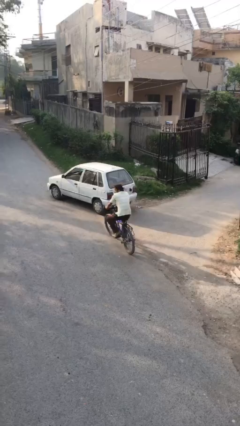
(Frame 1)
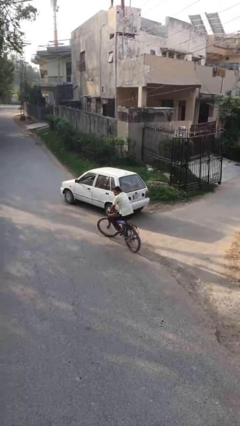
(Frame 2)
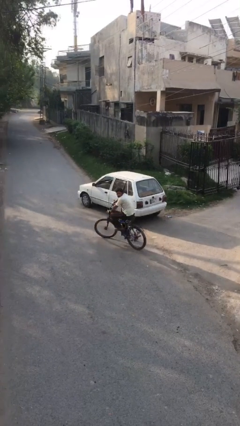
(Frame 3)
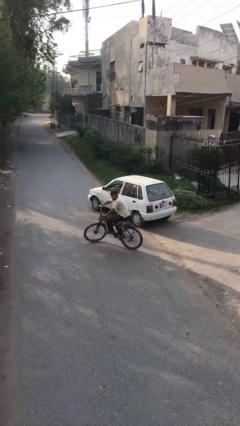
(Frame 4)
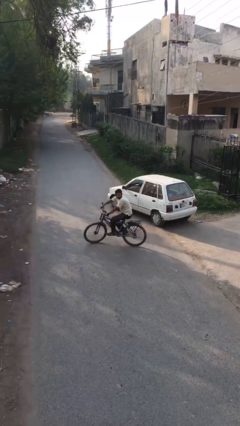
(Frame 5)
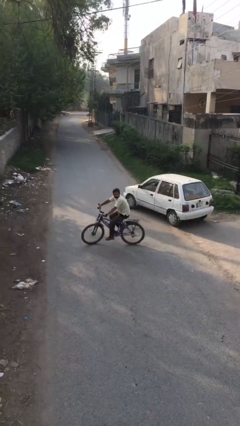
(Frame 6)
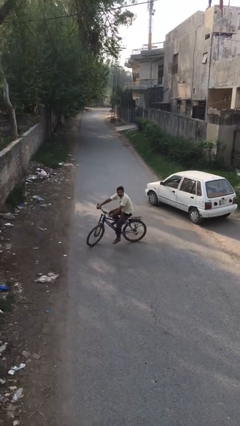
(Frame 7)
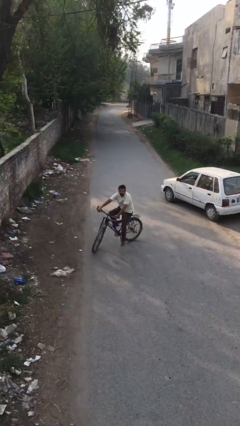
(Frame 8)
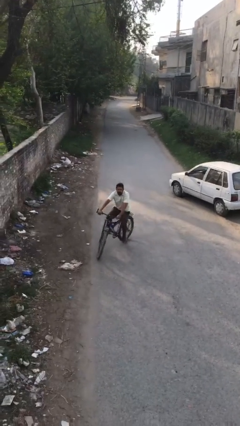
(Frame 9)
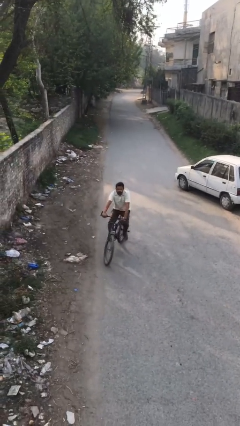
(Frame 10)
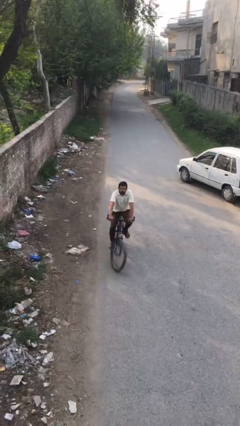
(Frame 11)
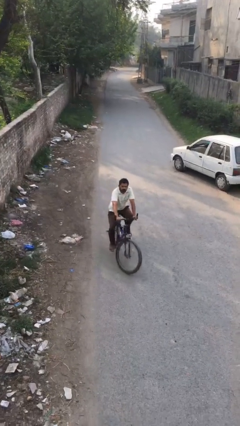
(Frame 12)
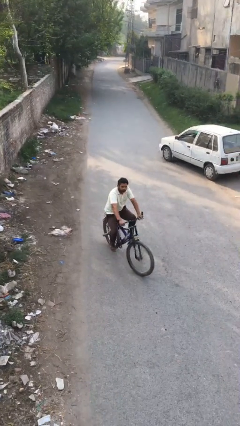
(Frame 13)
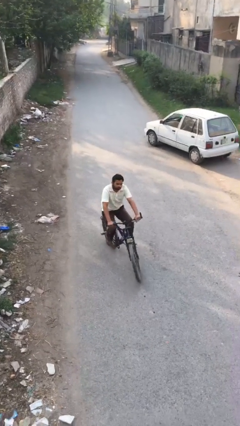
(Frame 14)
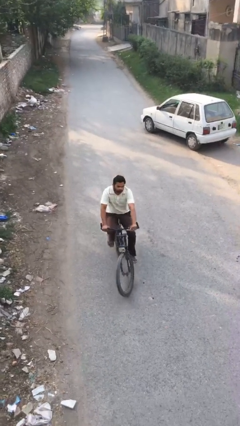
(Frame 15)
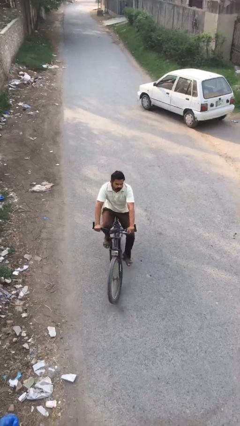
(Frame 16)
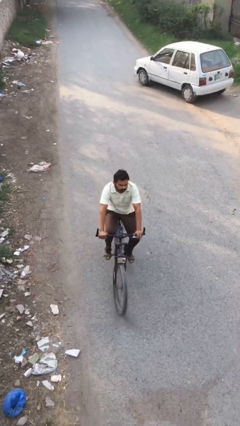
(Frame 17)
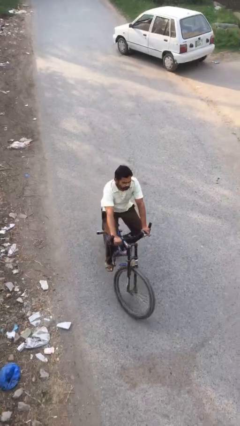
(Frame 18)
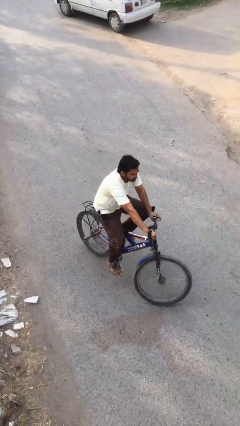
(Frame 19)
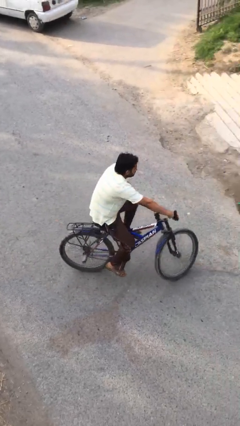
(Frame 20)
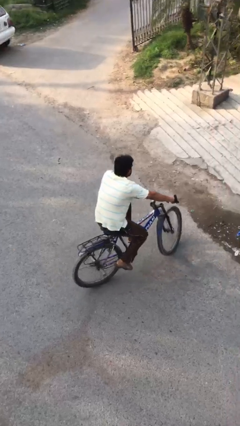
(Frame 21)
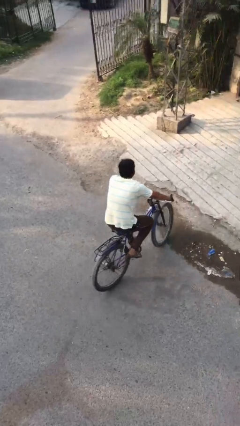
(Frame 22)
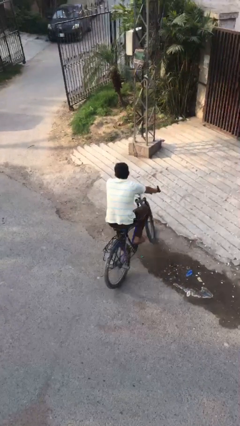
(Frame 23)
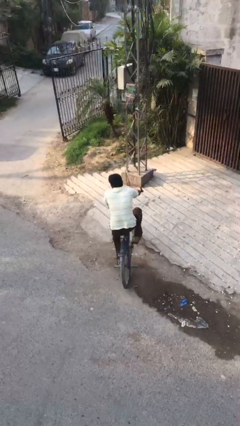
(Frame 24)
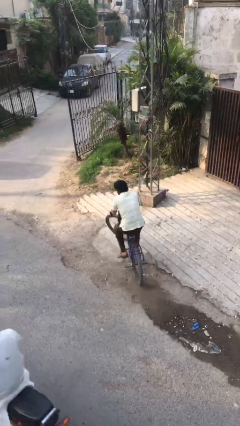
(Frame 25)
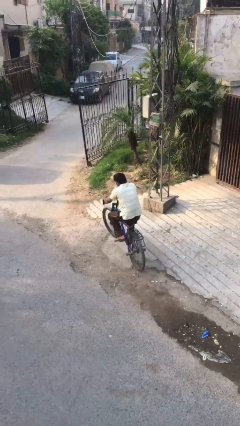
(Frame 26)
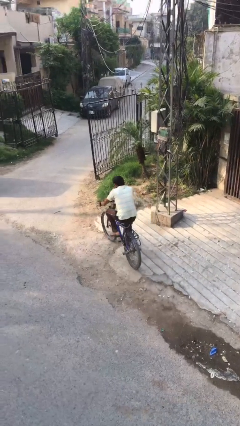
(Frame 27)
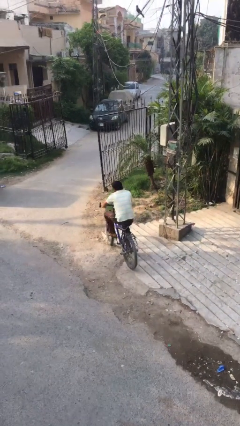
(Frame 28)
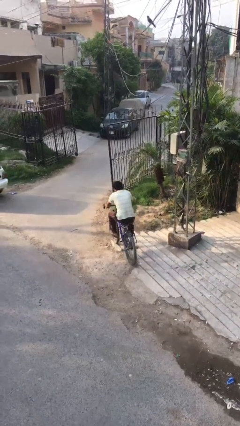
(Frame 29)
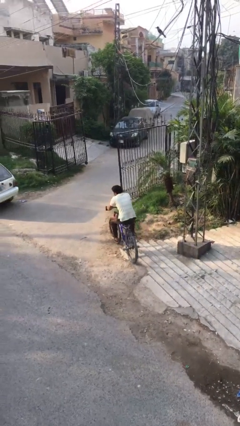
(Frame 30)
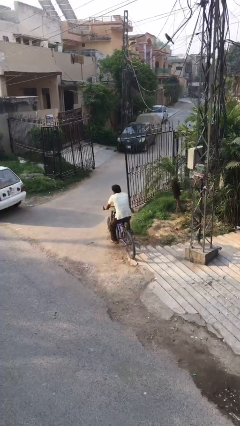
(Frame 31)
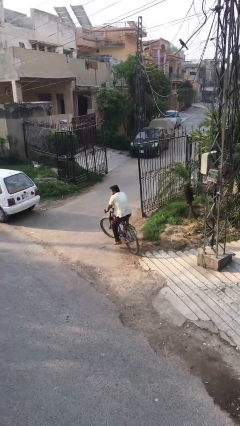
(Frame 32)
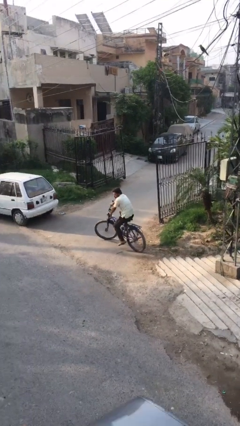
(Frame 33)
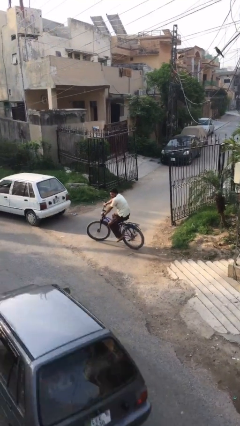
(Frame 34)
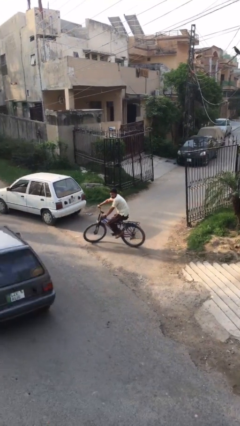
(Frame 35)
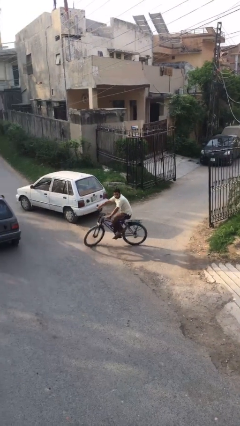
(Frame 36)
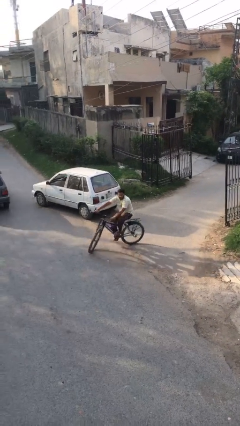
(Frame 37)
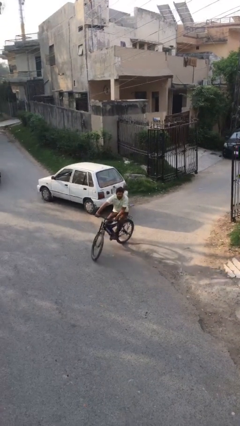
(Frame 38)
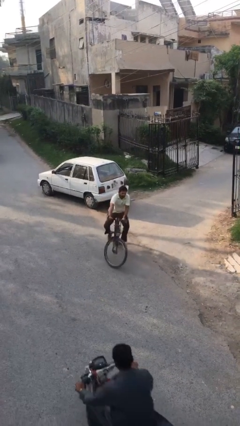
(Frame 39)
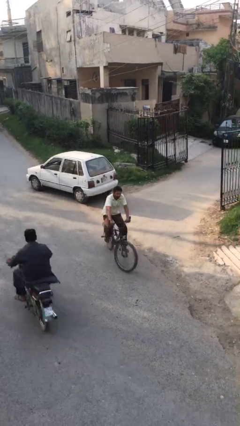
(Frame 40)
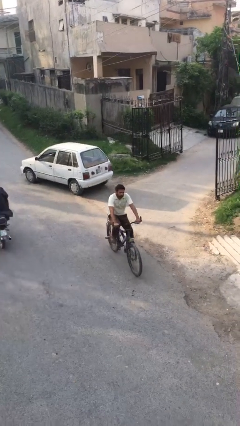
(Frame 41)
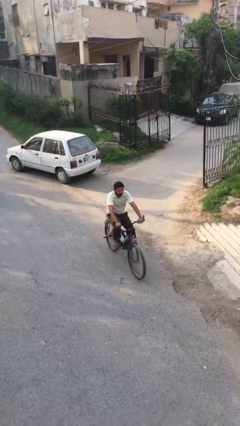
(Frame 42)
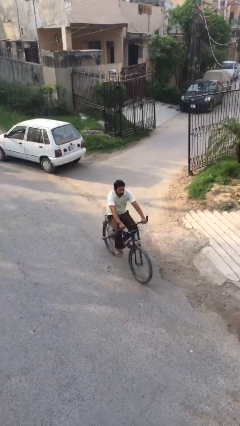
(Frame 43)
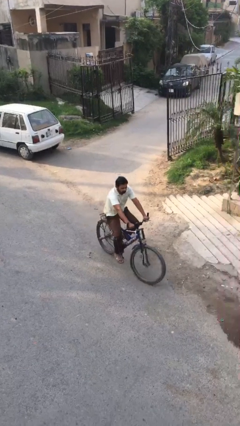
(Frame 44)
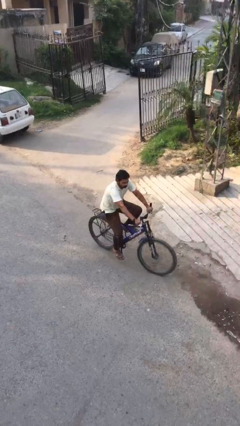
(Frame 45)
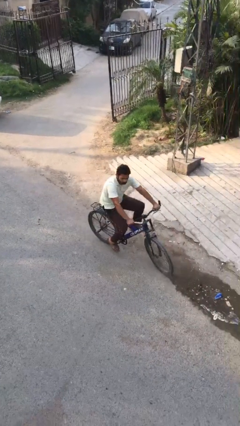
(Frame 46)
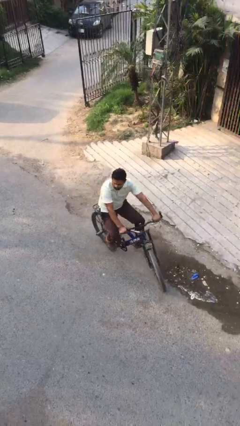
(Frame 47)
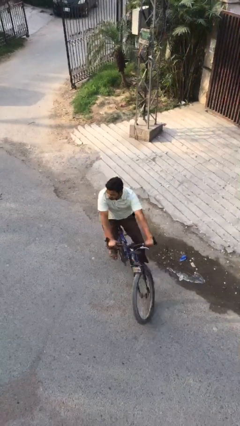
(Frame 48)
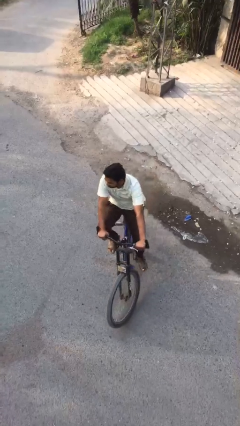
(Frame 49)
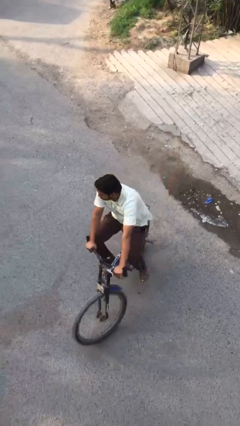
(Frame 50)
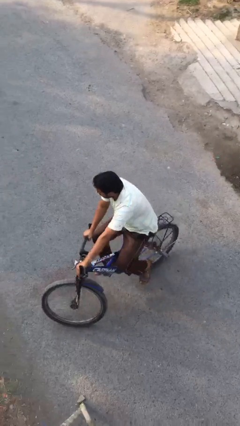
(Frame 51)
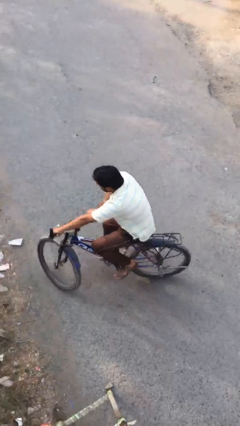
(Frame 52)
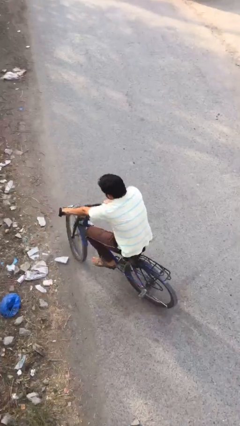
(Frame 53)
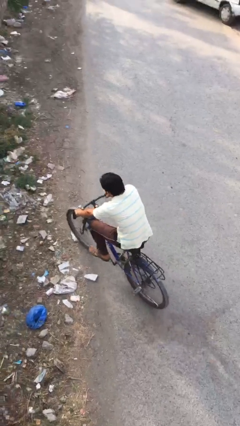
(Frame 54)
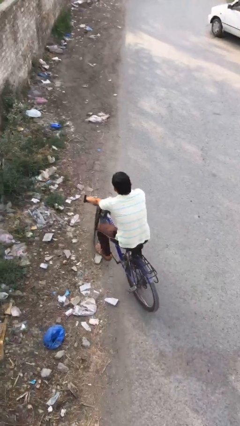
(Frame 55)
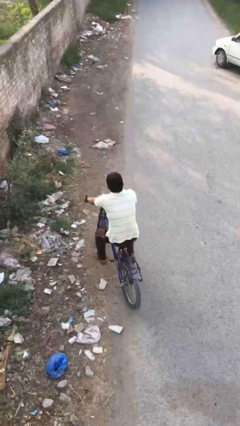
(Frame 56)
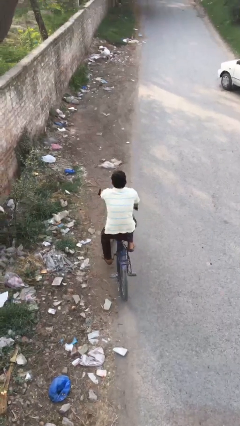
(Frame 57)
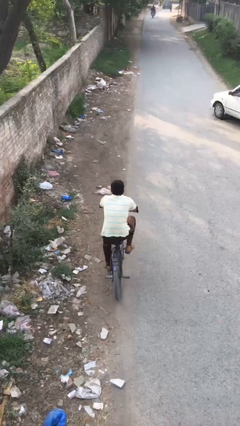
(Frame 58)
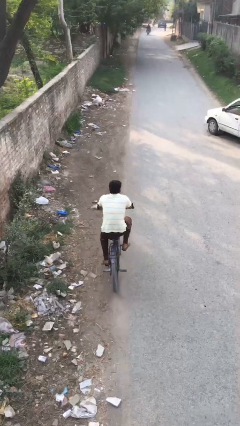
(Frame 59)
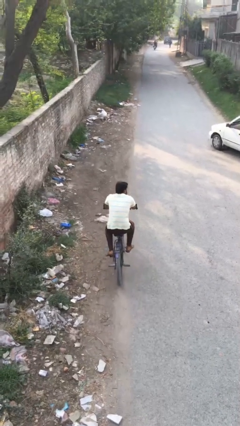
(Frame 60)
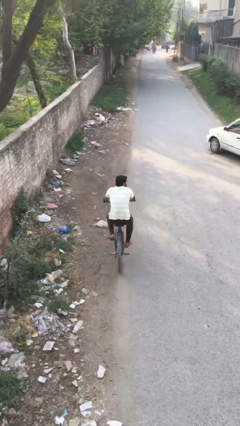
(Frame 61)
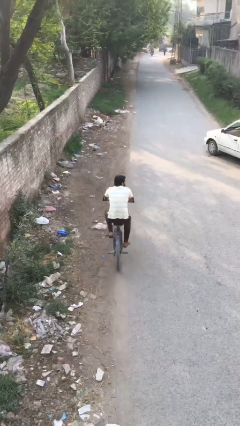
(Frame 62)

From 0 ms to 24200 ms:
person rides bicycle

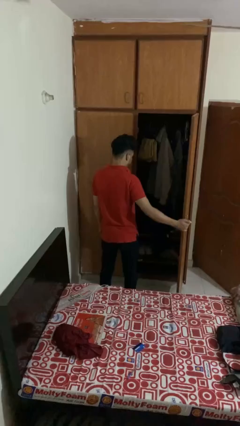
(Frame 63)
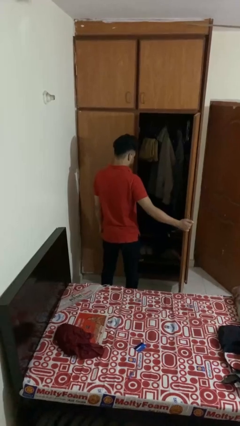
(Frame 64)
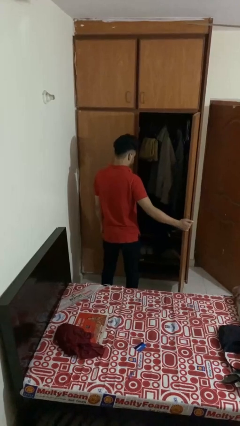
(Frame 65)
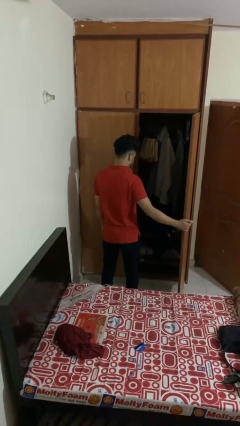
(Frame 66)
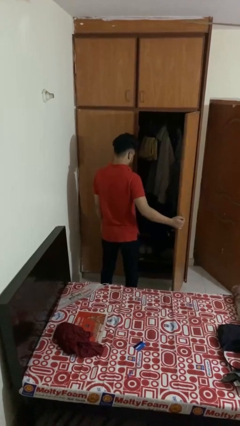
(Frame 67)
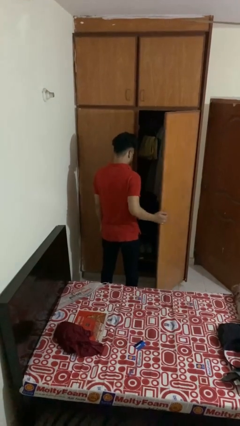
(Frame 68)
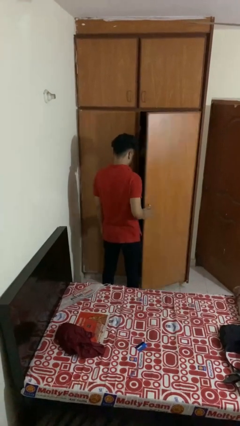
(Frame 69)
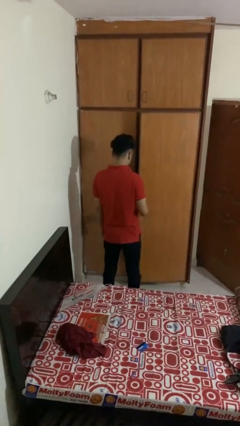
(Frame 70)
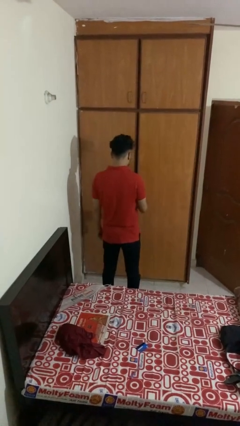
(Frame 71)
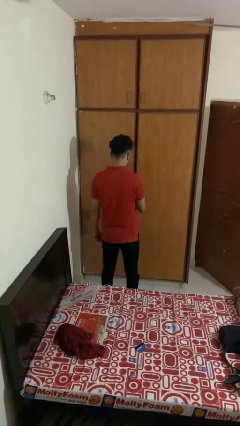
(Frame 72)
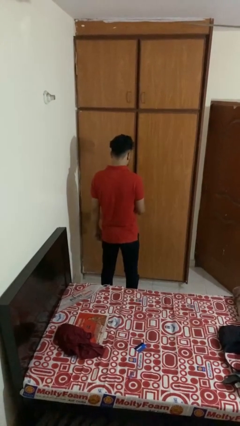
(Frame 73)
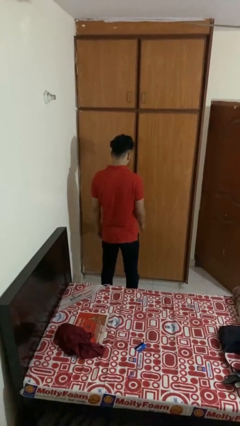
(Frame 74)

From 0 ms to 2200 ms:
person closes closet door

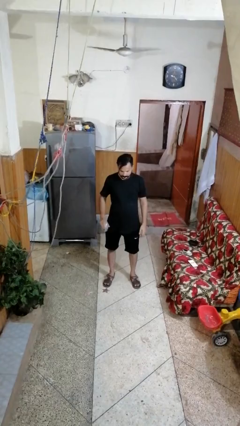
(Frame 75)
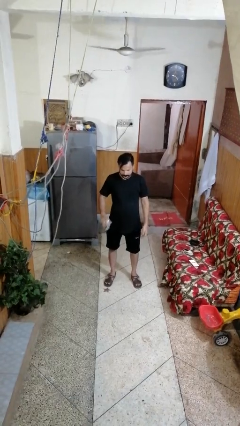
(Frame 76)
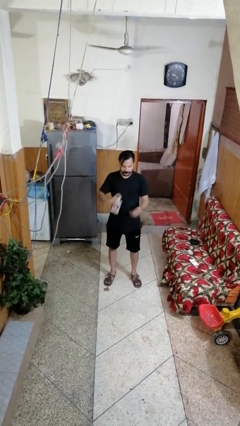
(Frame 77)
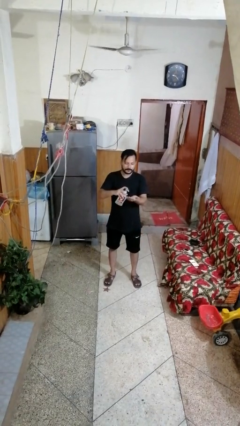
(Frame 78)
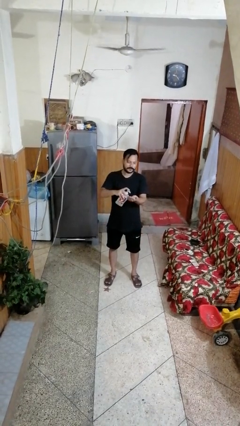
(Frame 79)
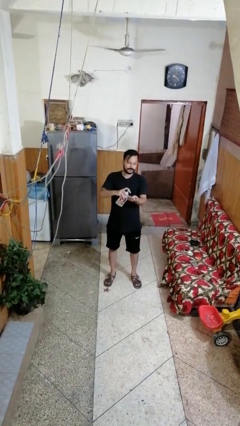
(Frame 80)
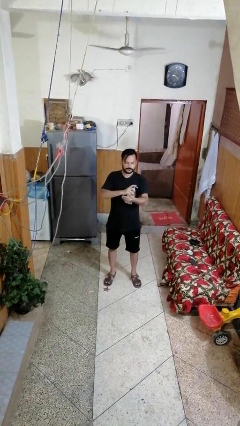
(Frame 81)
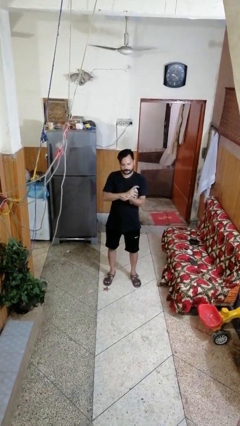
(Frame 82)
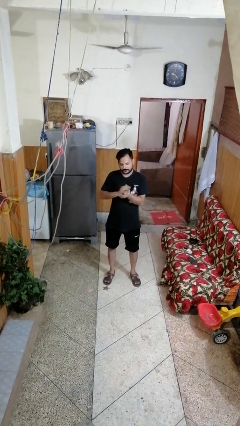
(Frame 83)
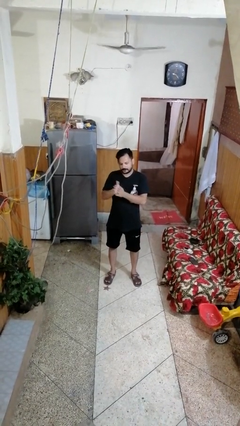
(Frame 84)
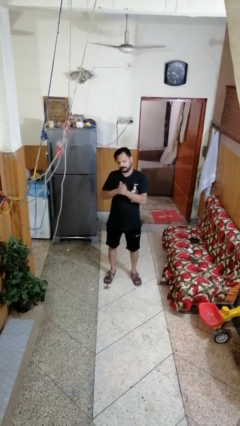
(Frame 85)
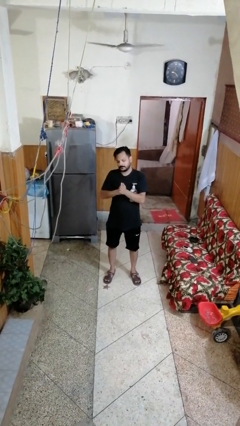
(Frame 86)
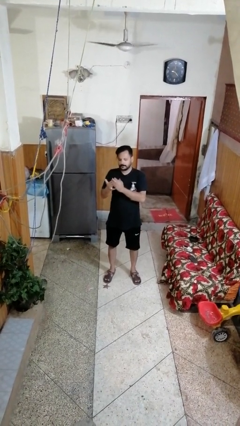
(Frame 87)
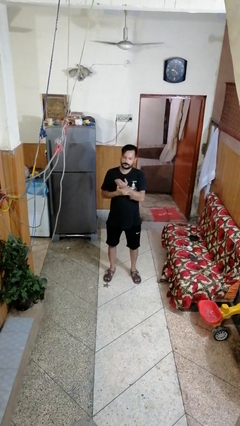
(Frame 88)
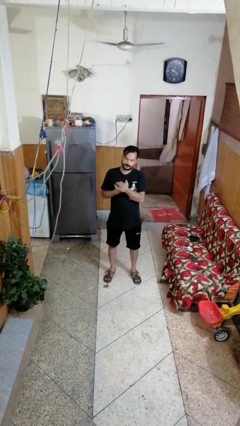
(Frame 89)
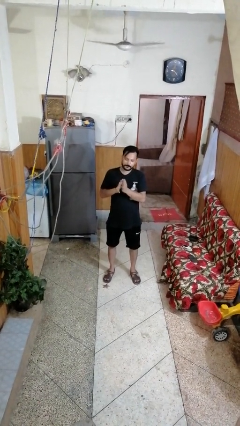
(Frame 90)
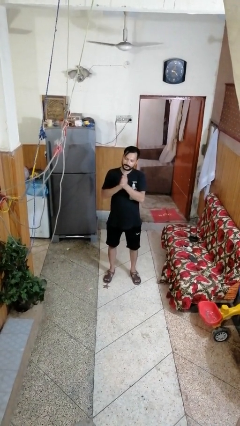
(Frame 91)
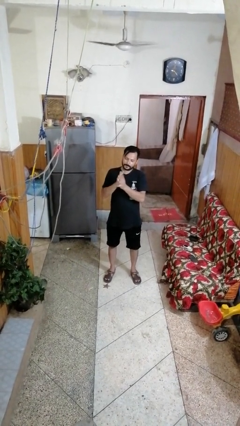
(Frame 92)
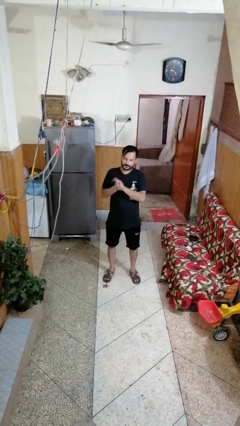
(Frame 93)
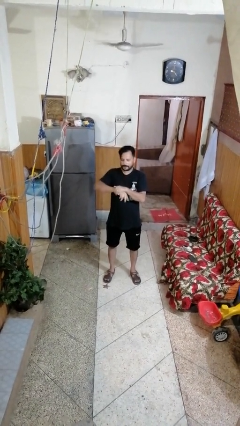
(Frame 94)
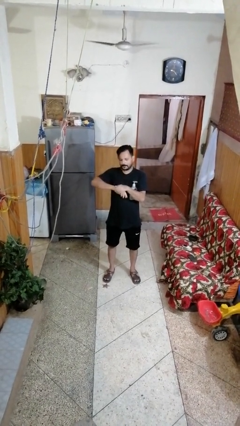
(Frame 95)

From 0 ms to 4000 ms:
person applies sunscreen
